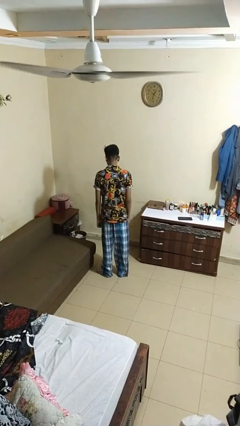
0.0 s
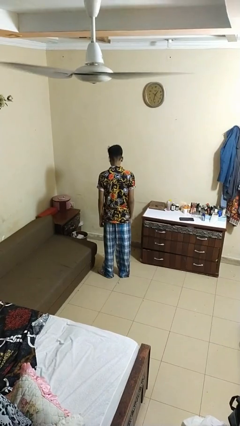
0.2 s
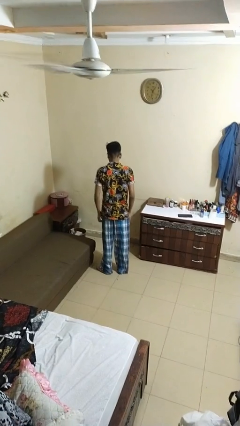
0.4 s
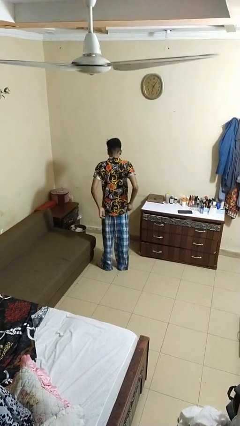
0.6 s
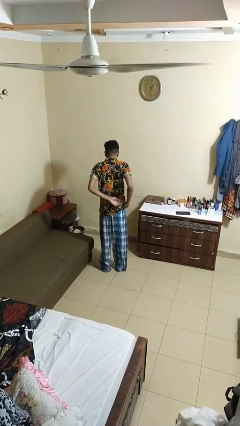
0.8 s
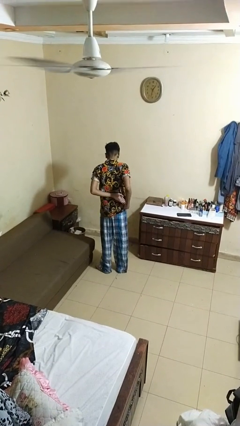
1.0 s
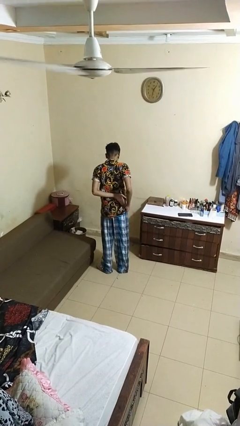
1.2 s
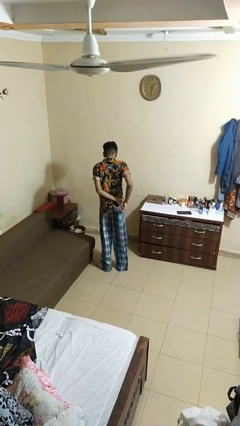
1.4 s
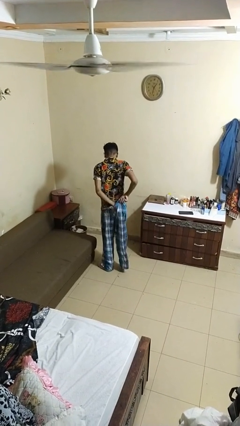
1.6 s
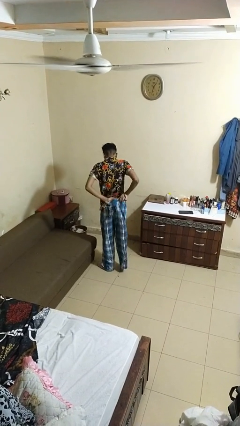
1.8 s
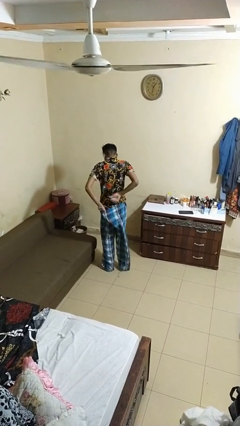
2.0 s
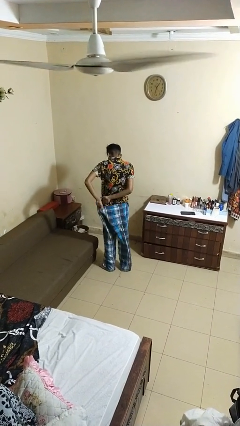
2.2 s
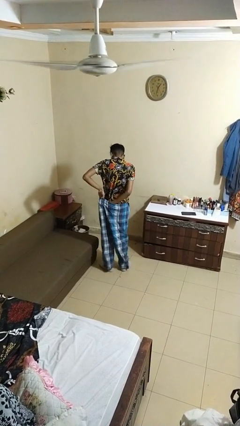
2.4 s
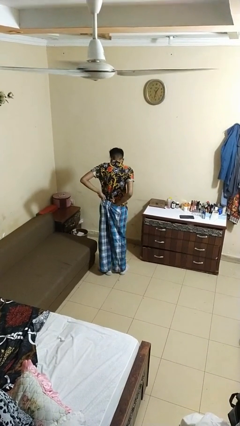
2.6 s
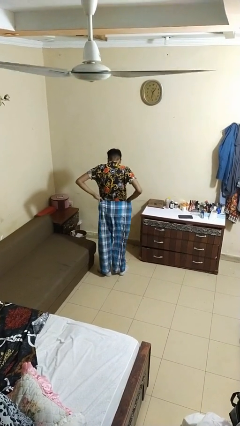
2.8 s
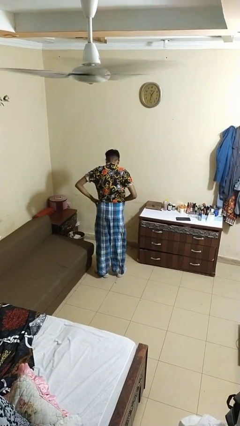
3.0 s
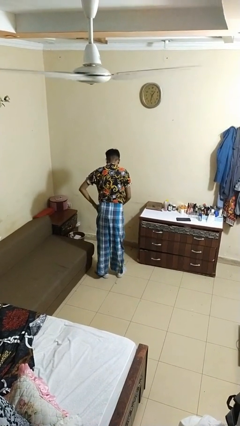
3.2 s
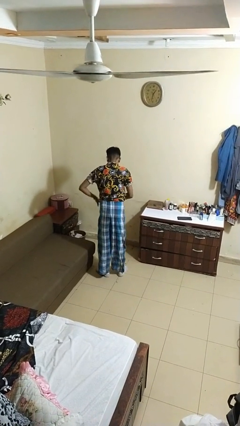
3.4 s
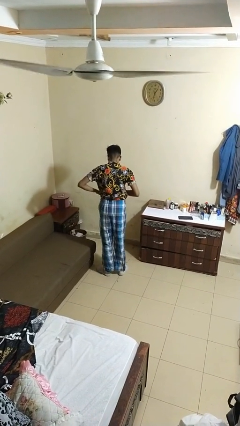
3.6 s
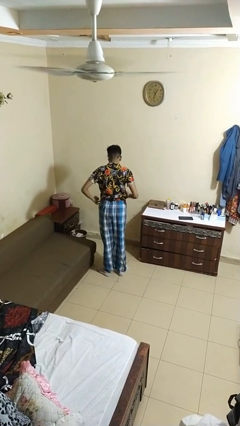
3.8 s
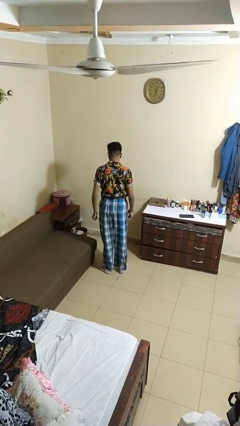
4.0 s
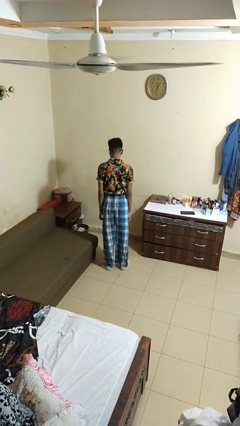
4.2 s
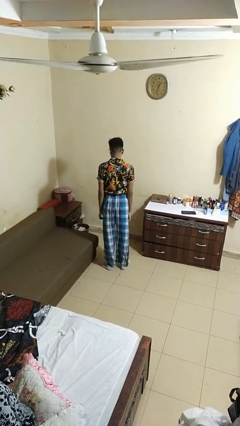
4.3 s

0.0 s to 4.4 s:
person tucks in shirt

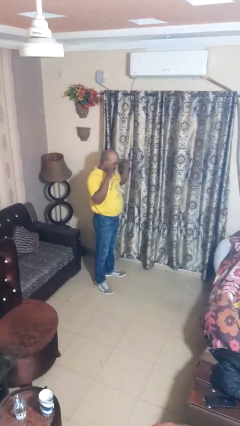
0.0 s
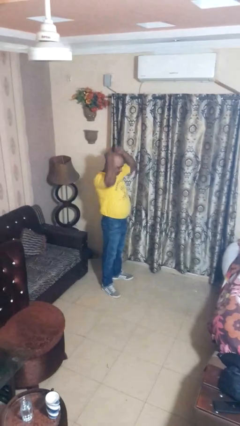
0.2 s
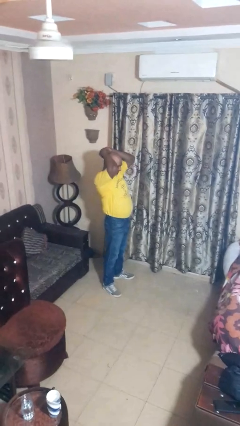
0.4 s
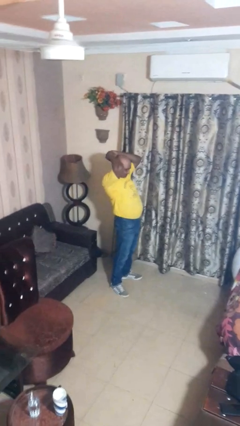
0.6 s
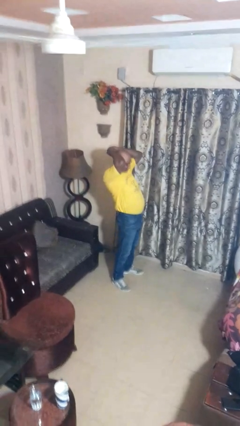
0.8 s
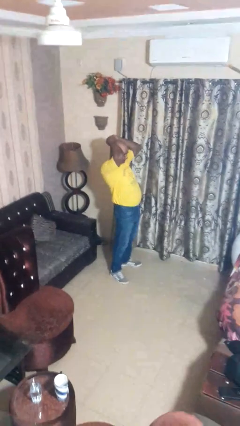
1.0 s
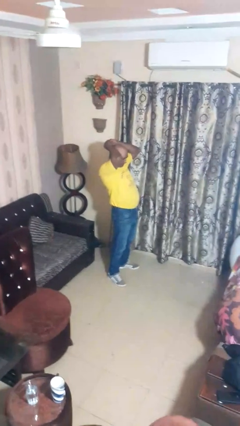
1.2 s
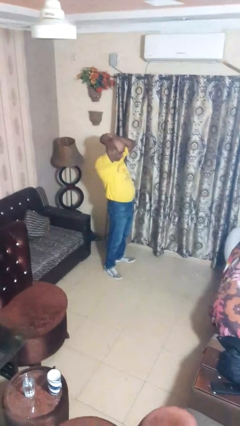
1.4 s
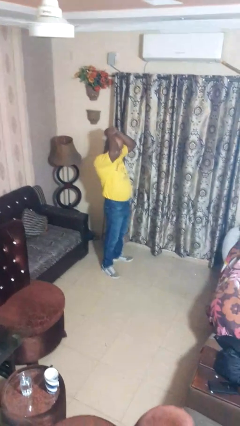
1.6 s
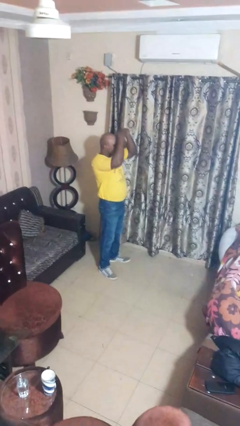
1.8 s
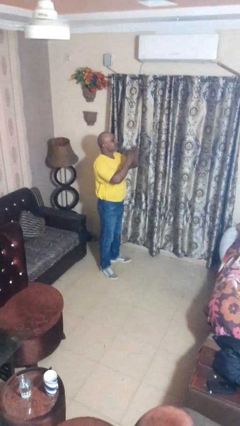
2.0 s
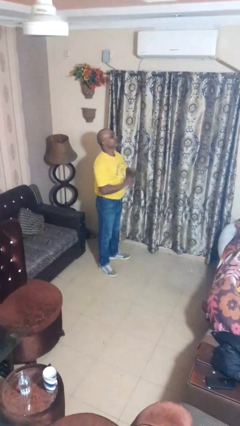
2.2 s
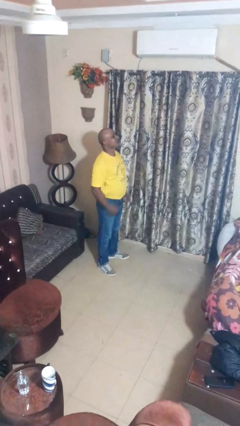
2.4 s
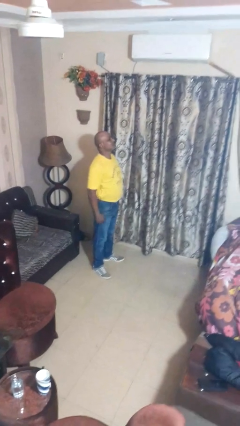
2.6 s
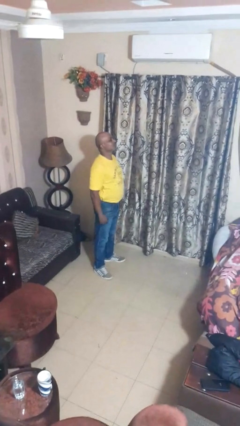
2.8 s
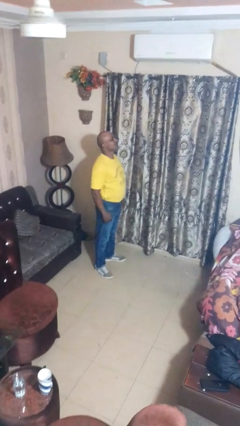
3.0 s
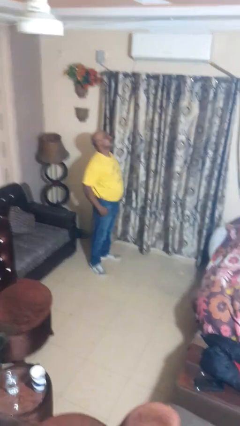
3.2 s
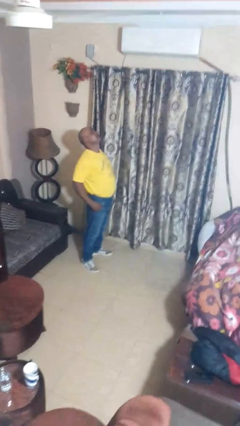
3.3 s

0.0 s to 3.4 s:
person stretches arms over head

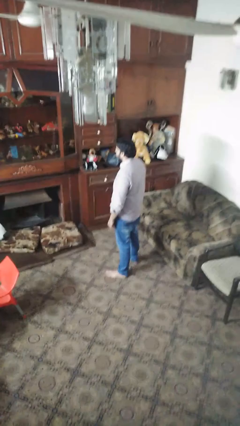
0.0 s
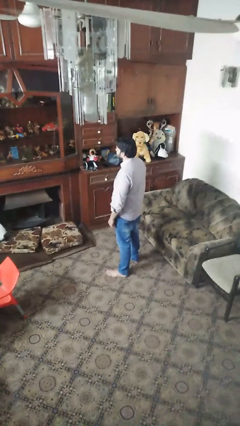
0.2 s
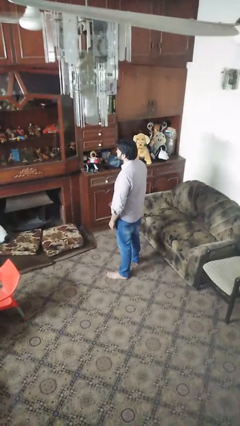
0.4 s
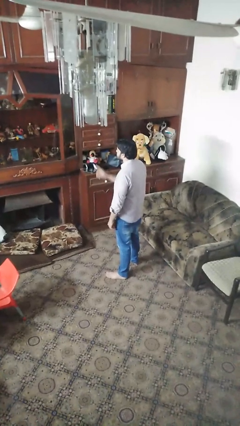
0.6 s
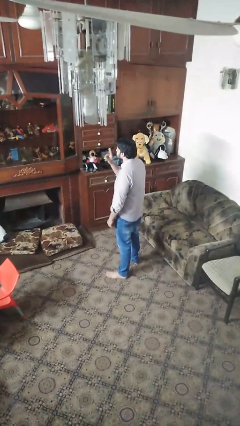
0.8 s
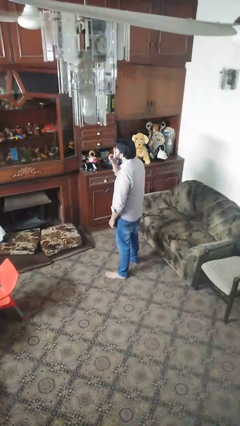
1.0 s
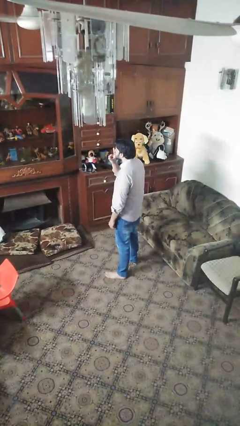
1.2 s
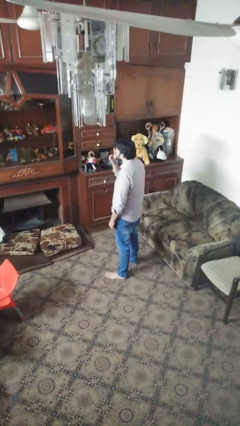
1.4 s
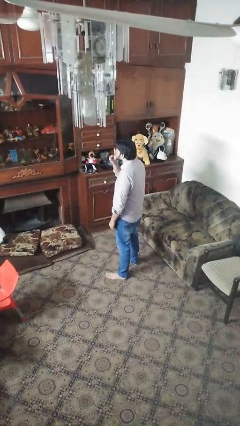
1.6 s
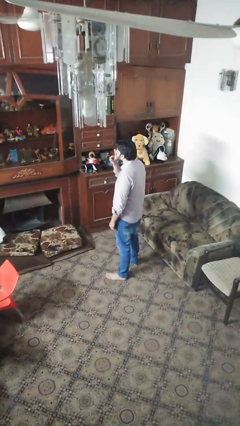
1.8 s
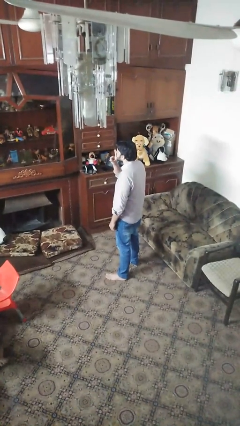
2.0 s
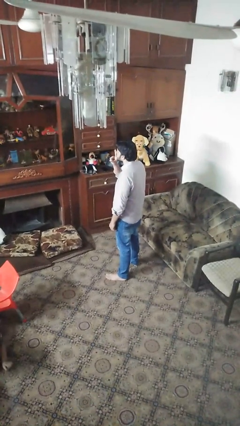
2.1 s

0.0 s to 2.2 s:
person gestures be quiet

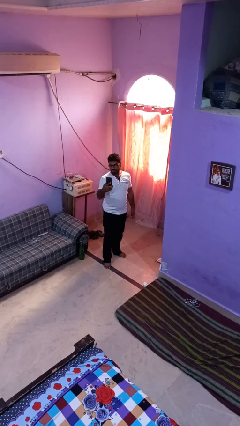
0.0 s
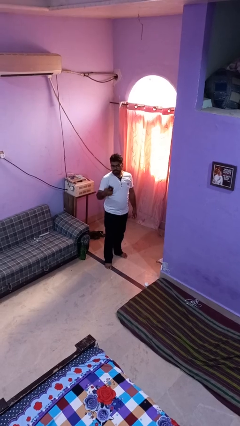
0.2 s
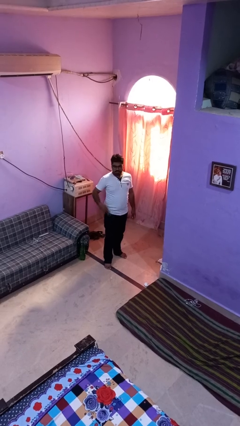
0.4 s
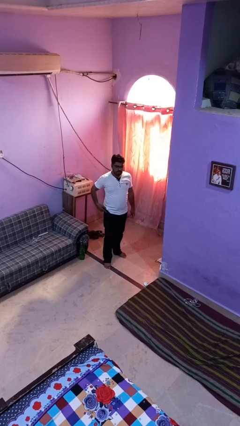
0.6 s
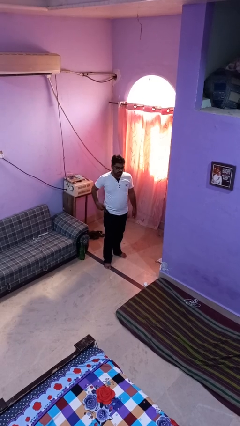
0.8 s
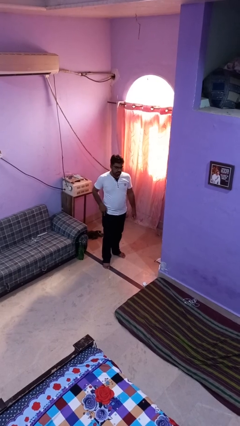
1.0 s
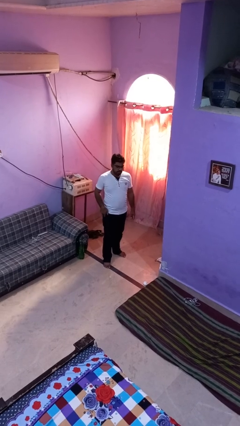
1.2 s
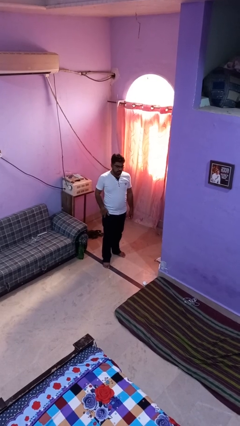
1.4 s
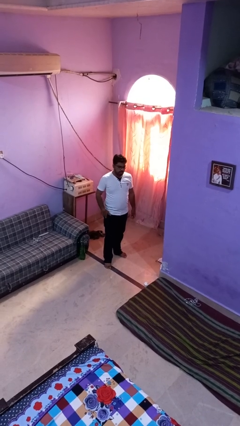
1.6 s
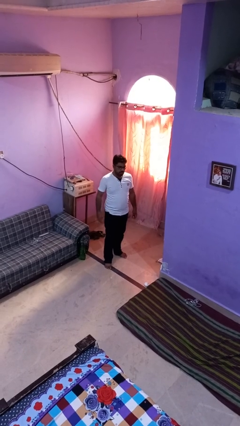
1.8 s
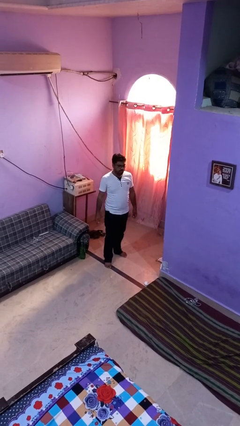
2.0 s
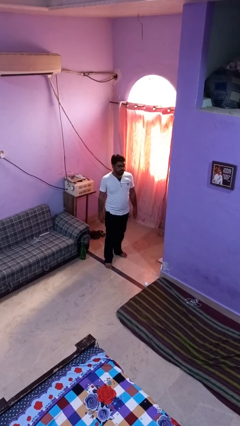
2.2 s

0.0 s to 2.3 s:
person puts phone into pocket

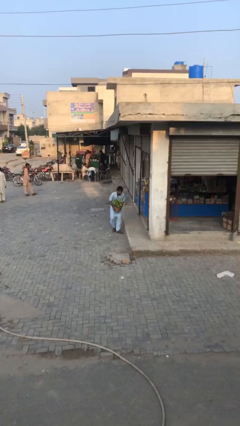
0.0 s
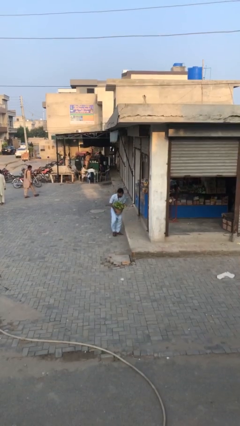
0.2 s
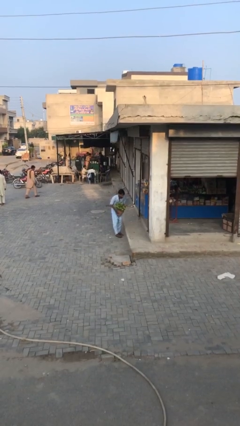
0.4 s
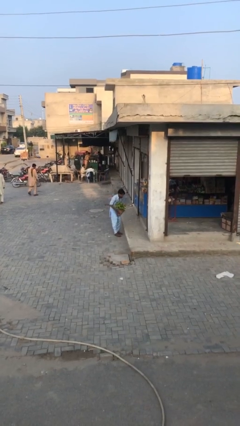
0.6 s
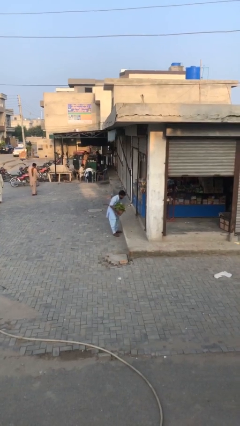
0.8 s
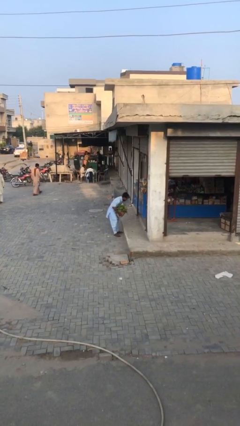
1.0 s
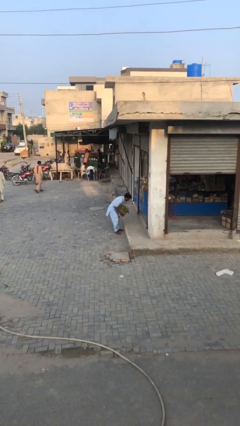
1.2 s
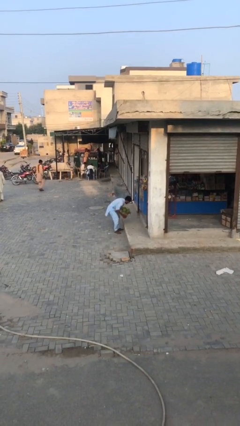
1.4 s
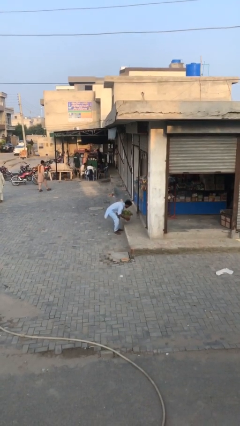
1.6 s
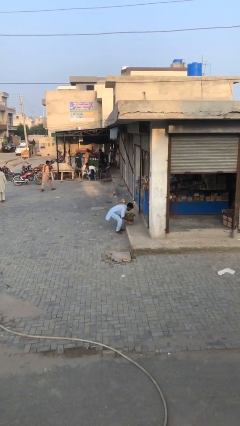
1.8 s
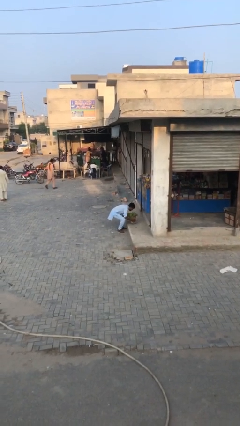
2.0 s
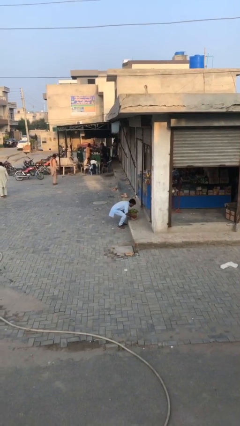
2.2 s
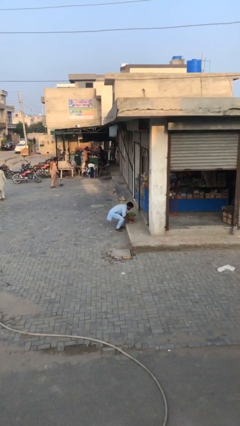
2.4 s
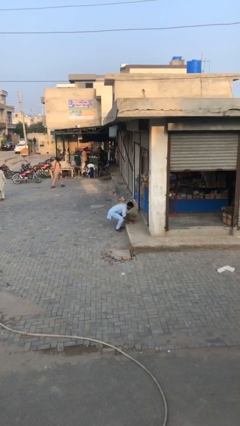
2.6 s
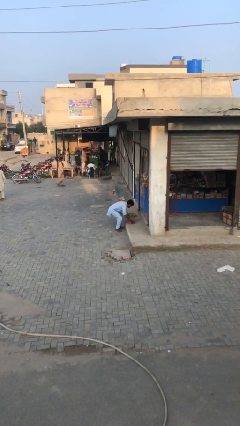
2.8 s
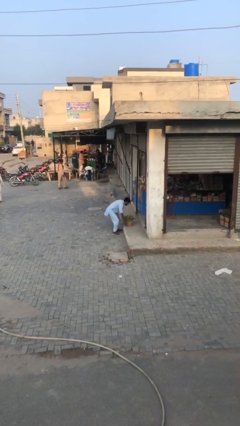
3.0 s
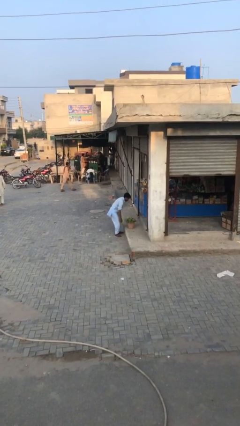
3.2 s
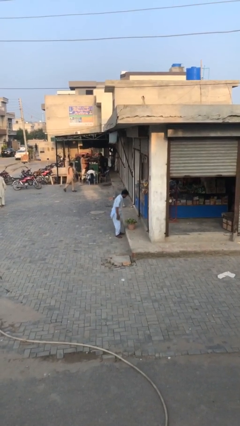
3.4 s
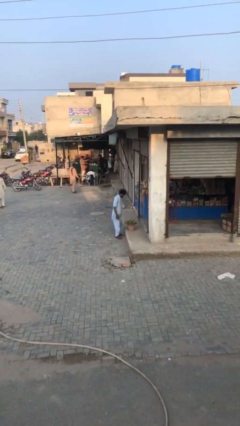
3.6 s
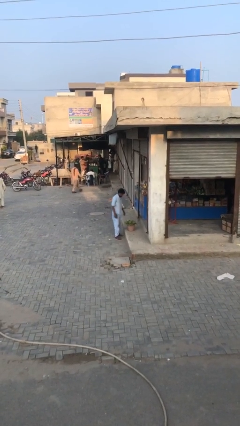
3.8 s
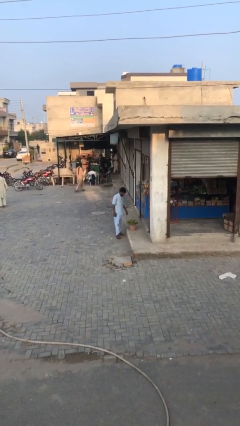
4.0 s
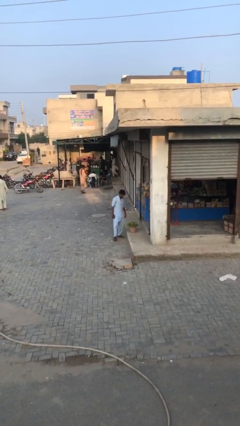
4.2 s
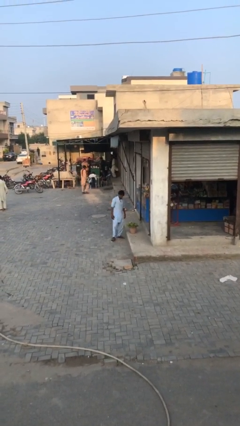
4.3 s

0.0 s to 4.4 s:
person puts down object on floor

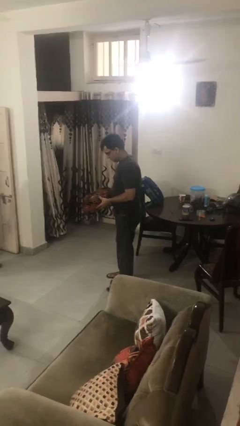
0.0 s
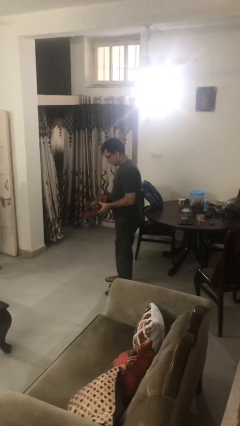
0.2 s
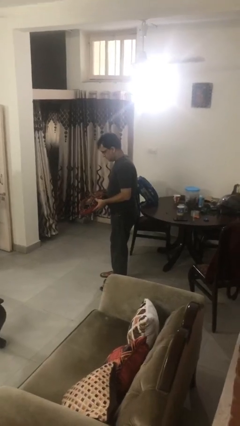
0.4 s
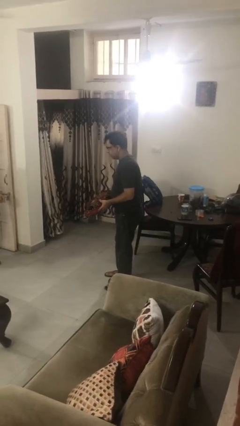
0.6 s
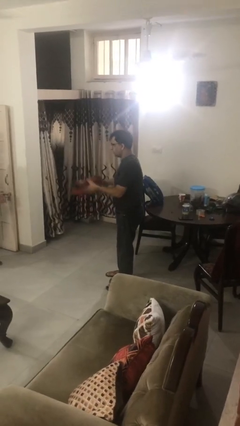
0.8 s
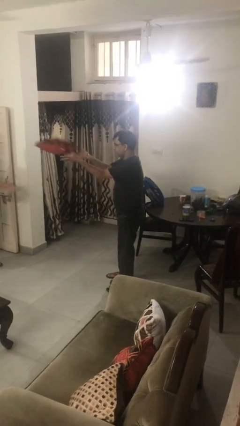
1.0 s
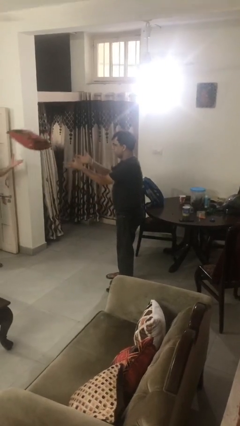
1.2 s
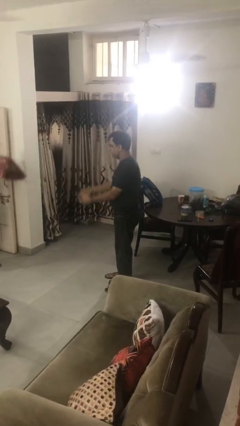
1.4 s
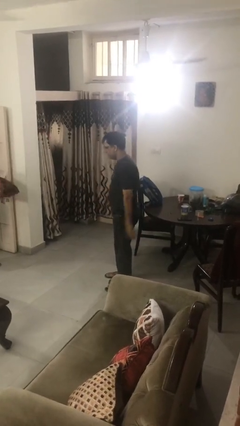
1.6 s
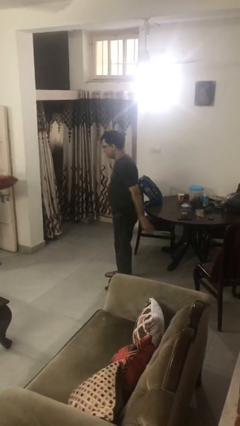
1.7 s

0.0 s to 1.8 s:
person throws object to person
